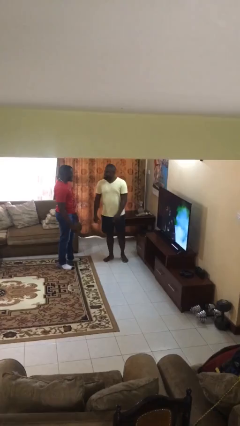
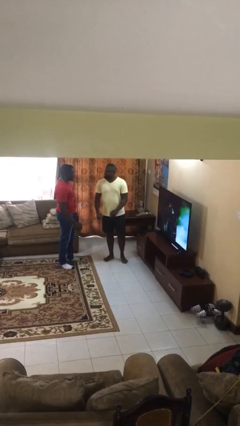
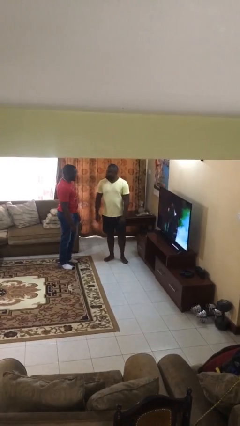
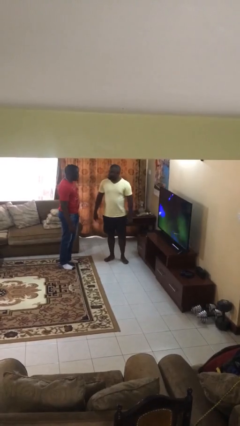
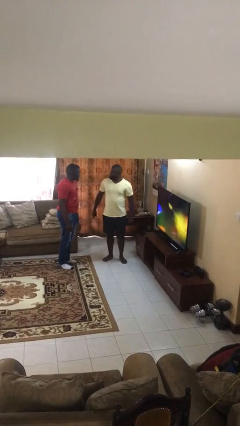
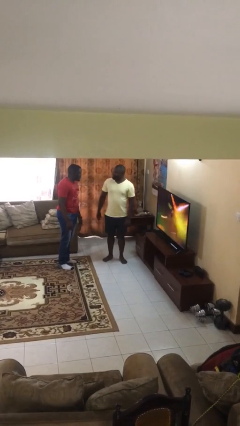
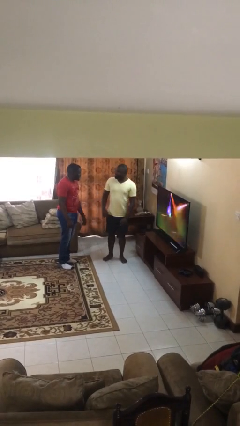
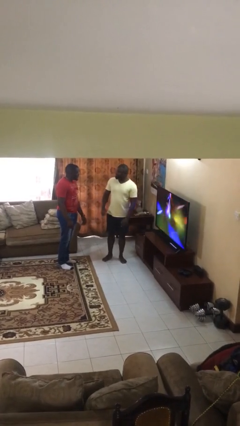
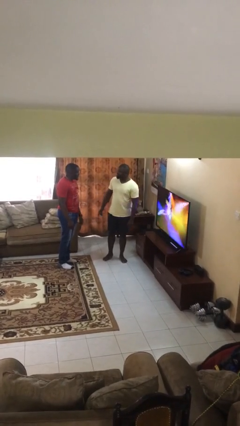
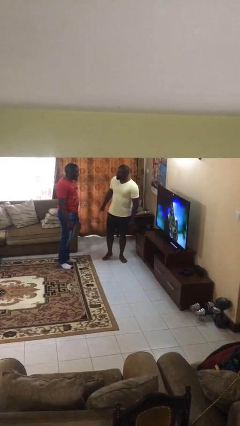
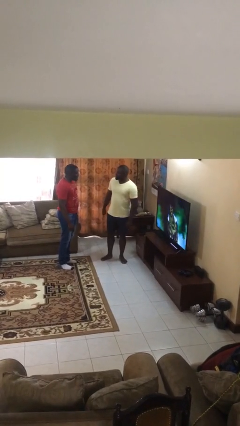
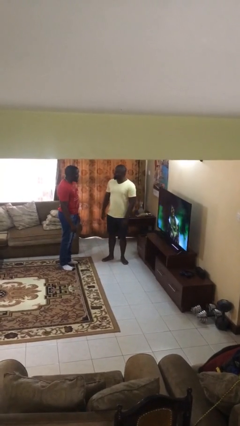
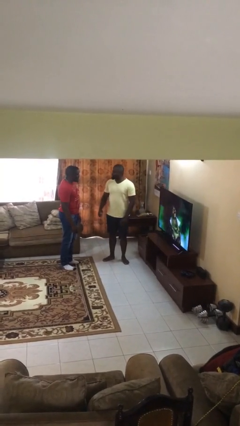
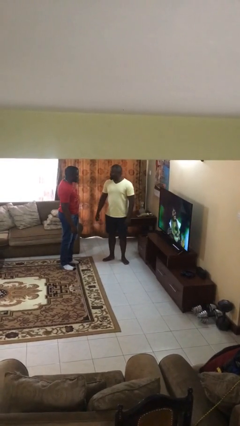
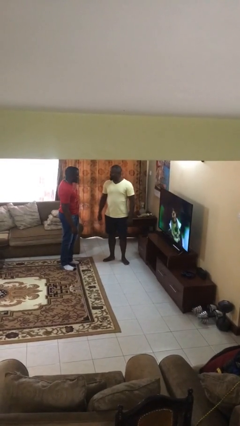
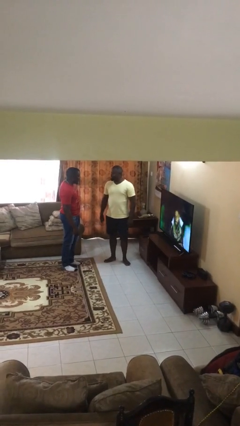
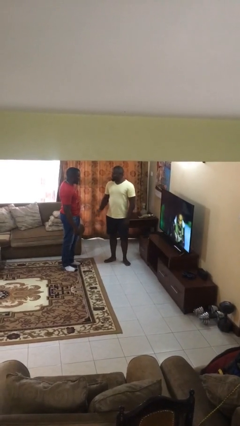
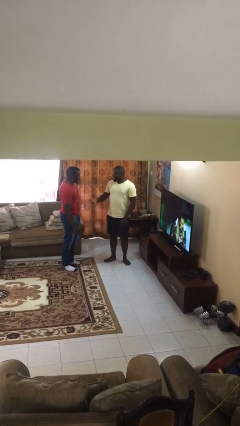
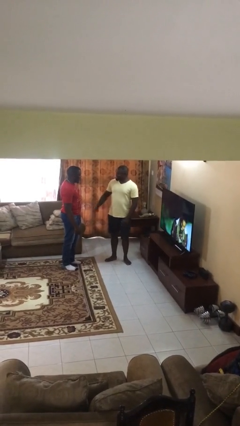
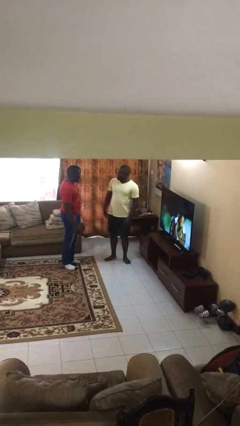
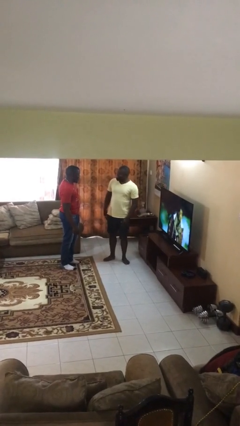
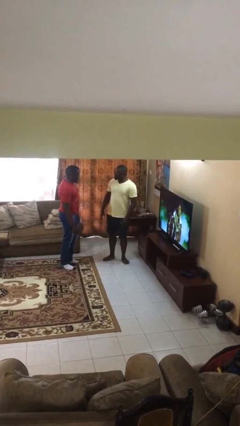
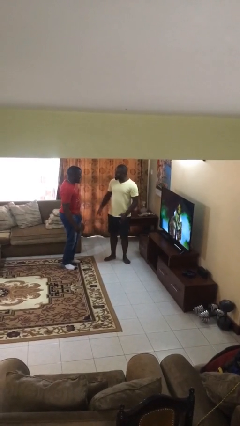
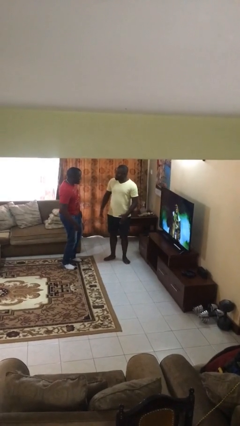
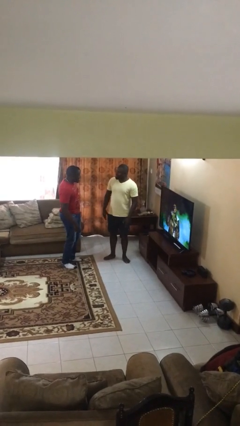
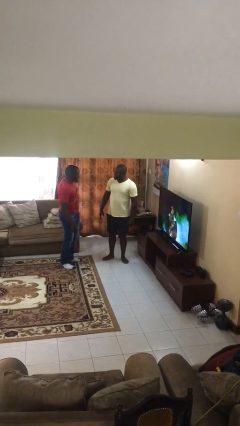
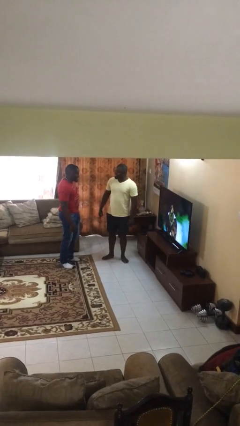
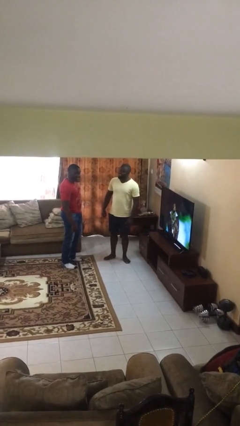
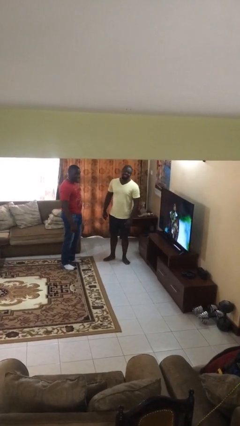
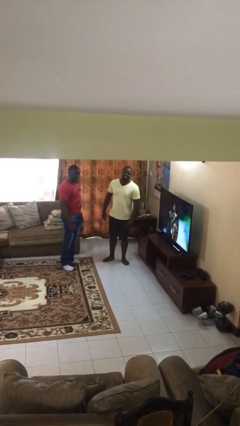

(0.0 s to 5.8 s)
person talks to person

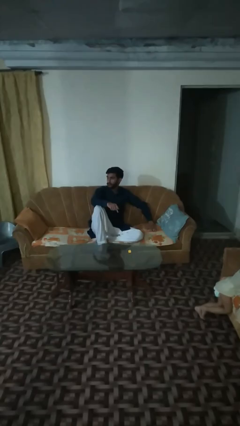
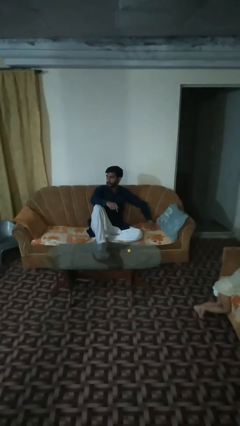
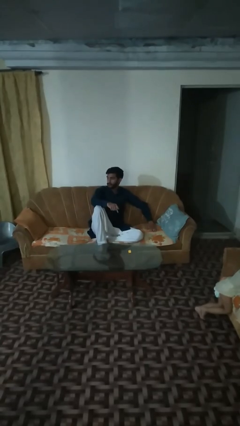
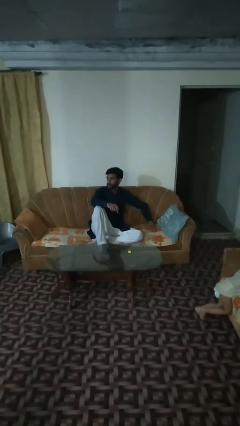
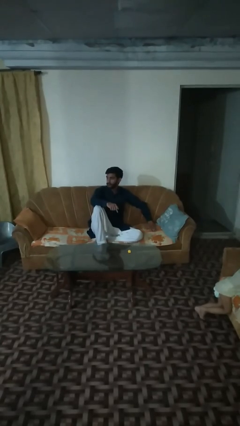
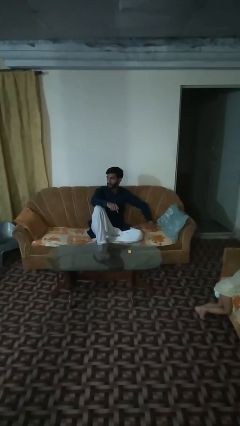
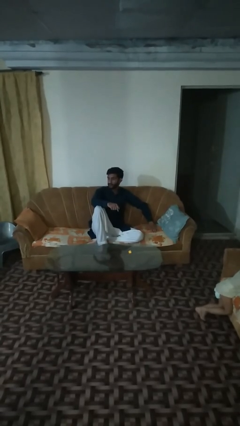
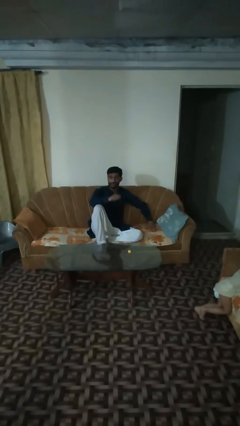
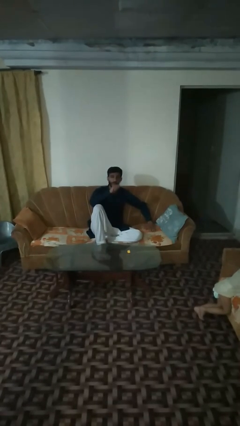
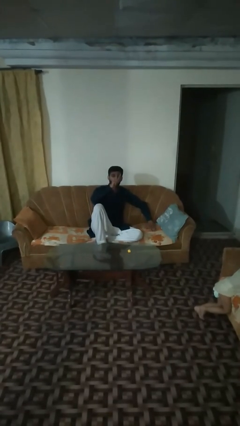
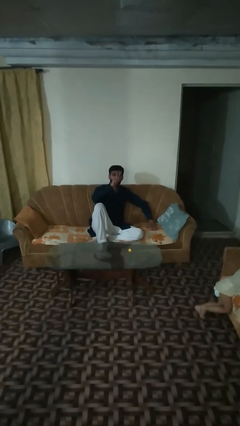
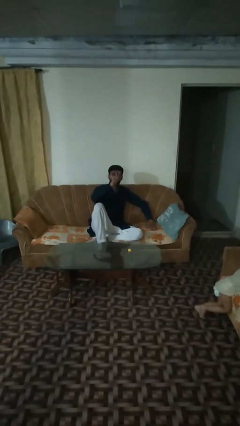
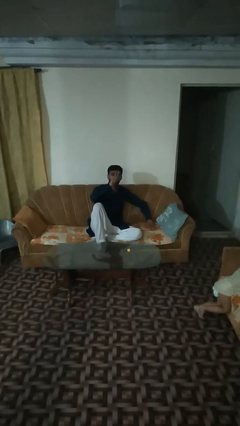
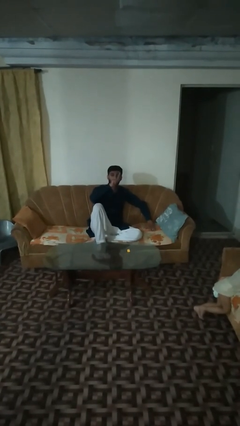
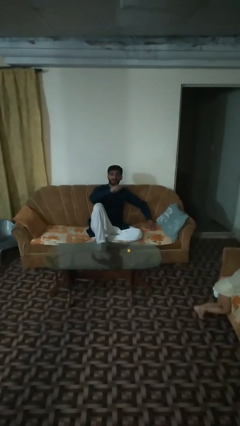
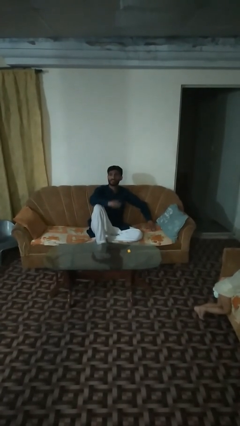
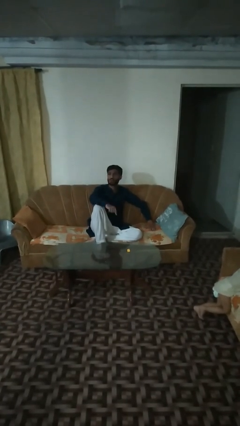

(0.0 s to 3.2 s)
person vapes

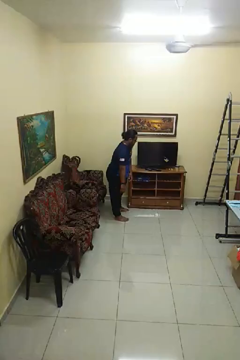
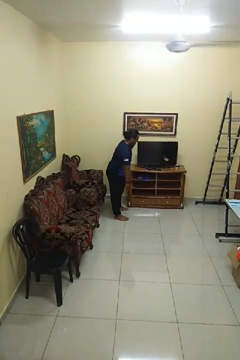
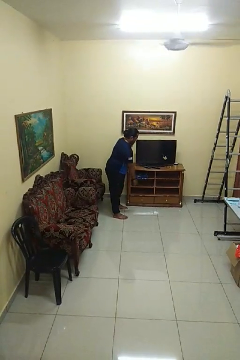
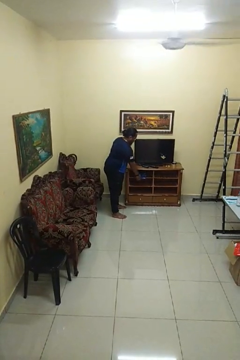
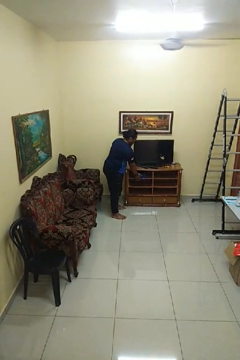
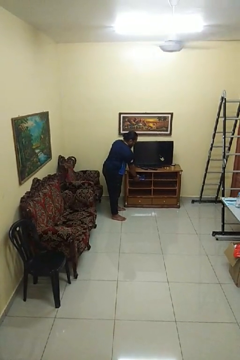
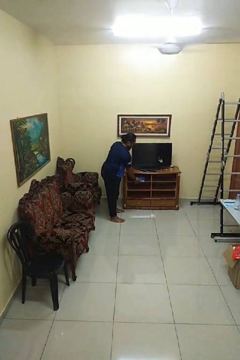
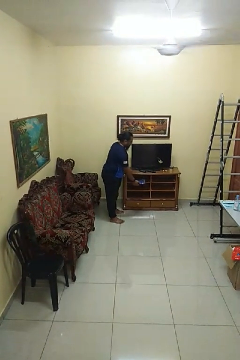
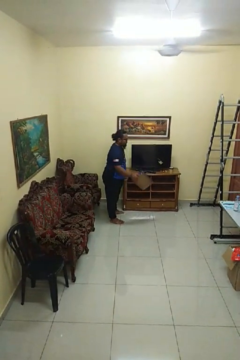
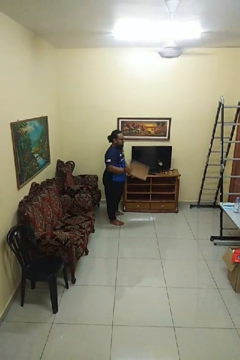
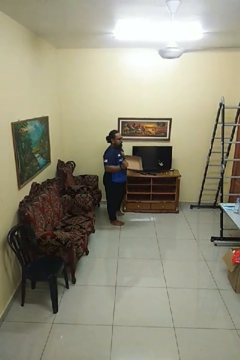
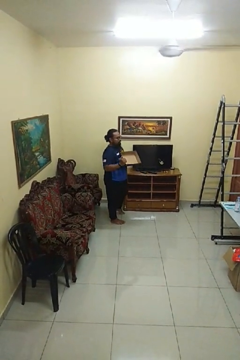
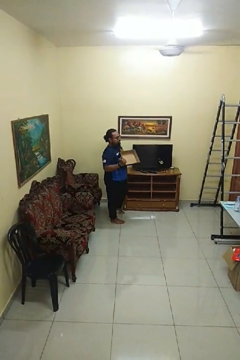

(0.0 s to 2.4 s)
person picks up object from cabinet

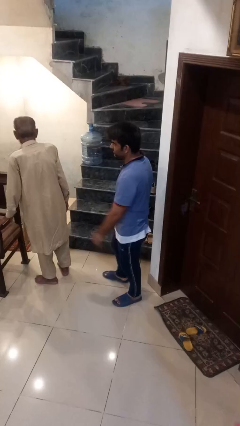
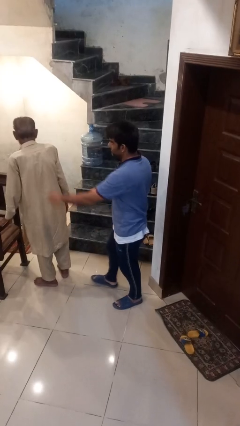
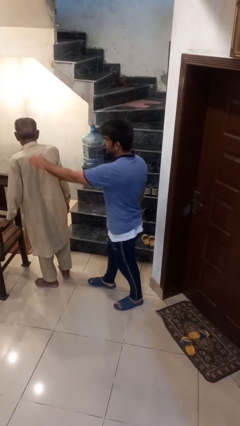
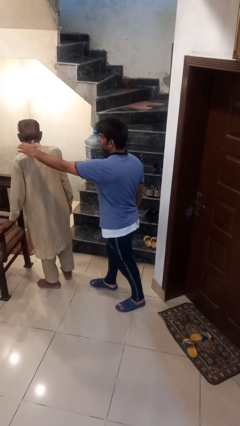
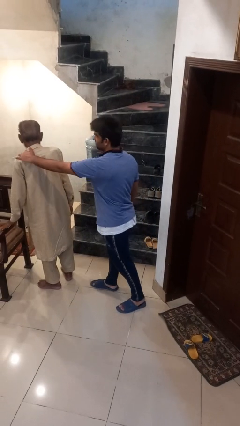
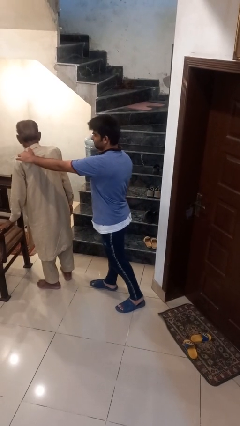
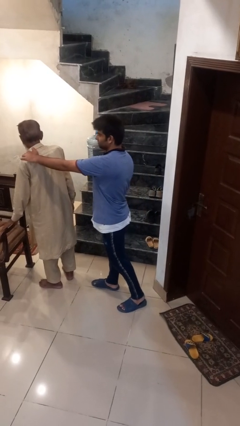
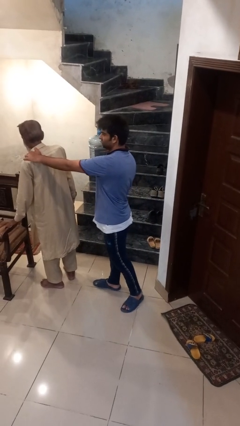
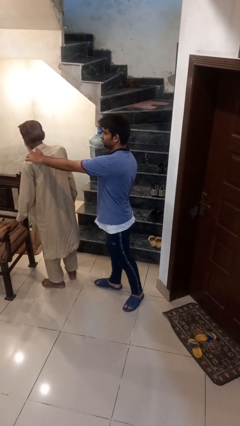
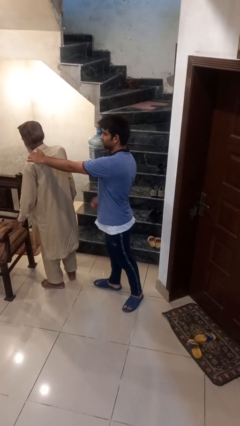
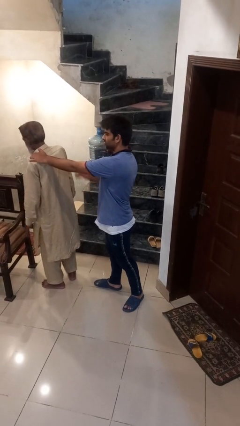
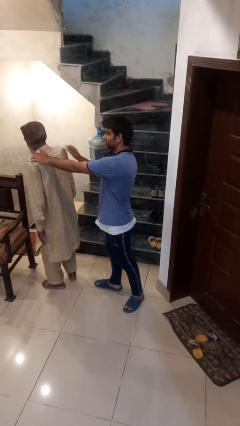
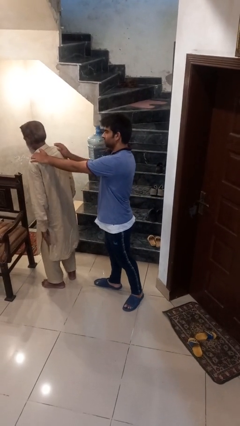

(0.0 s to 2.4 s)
person grabs person by shoulder

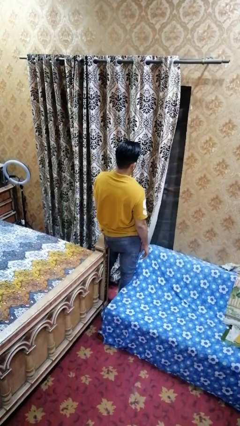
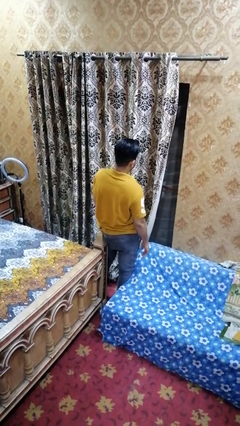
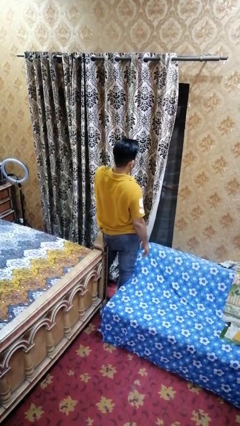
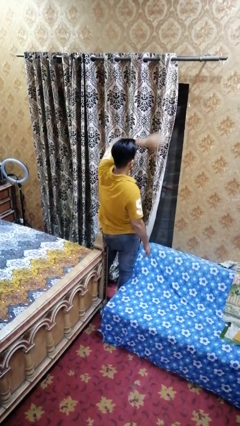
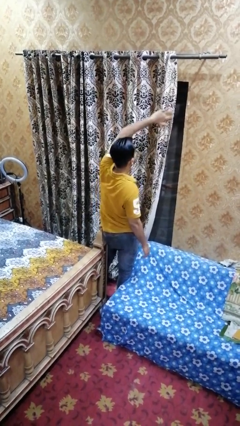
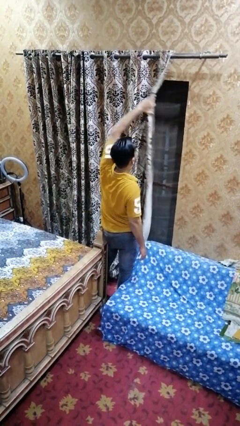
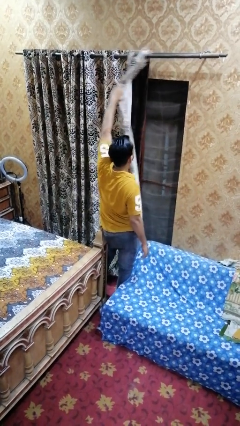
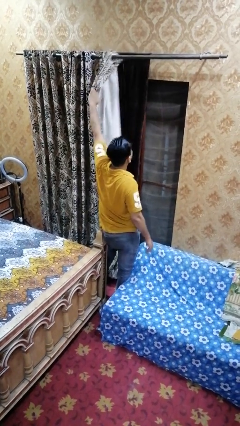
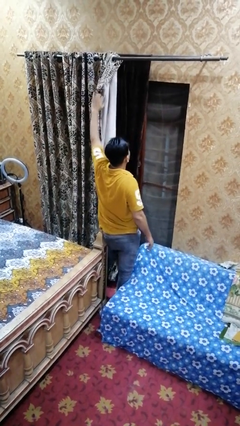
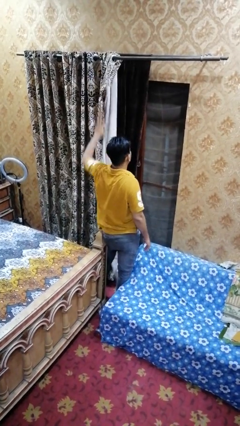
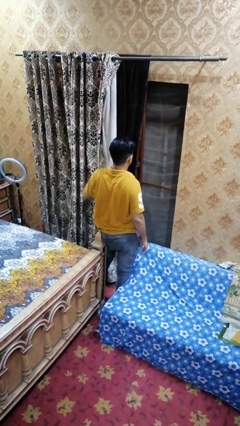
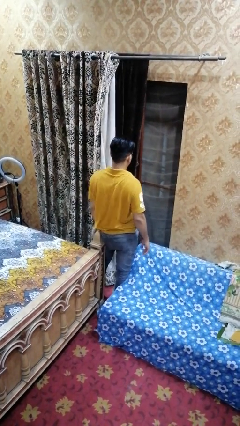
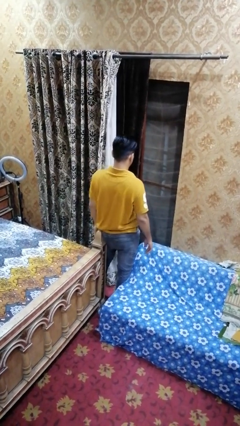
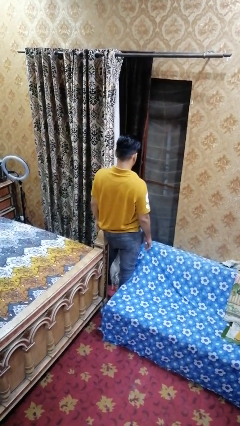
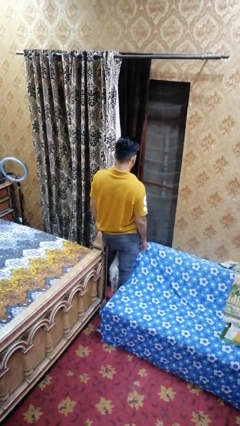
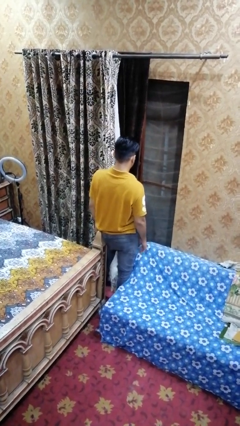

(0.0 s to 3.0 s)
person opens curtains

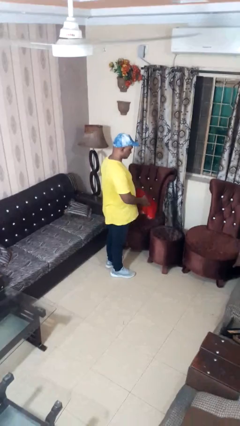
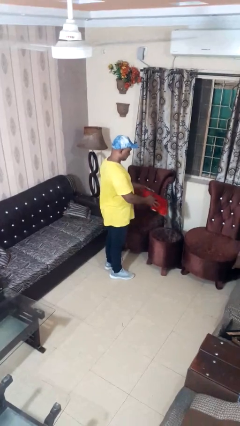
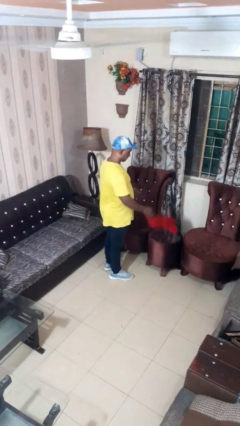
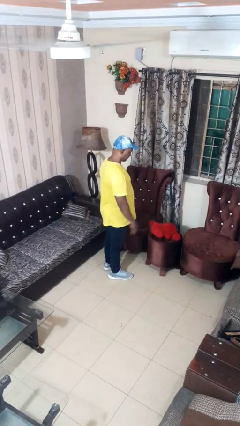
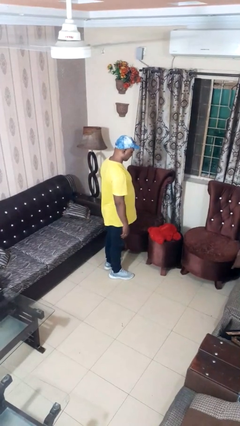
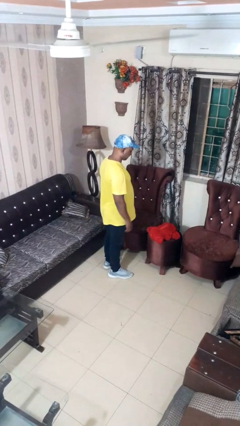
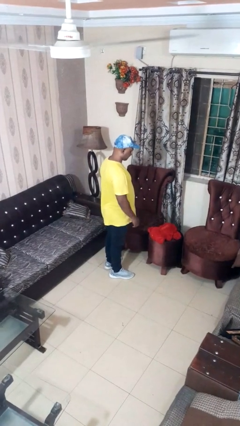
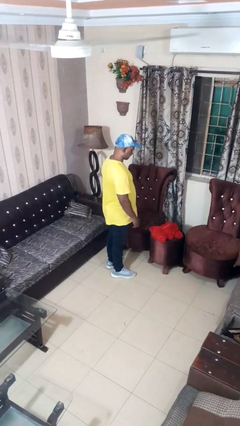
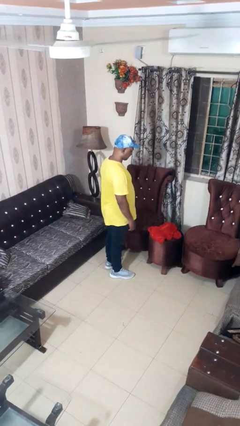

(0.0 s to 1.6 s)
person throws object on table
